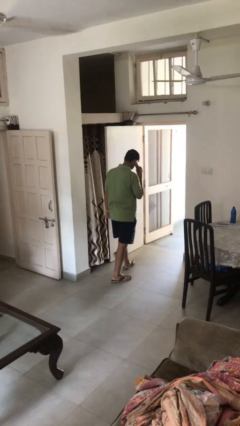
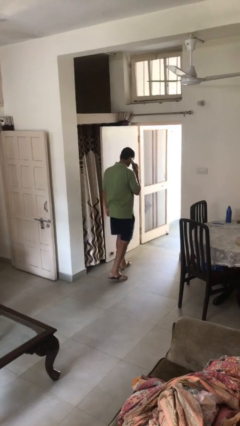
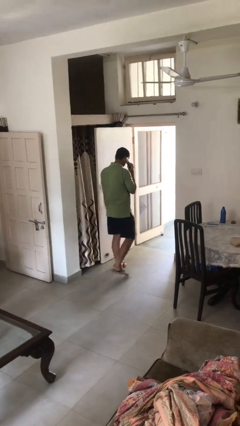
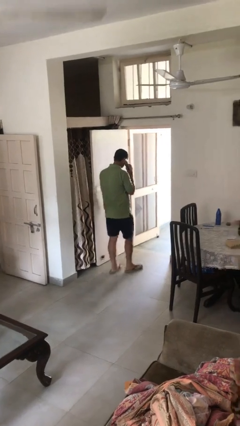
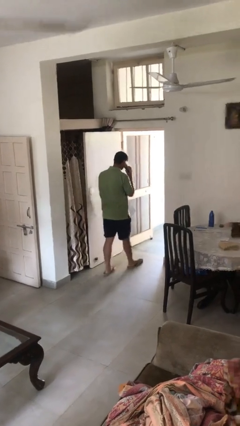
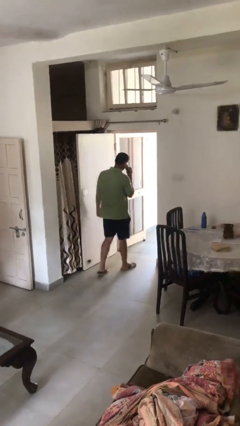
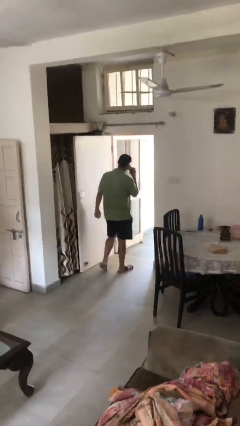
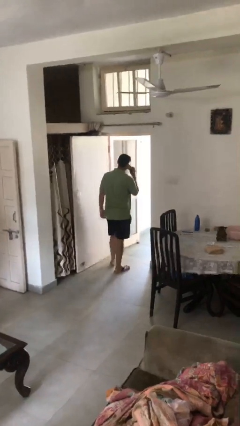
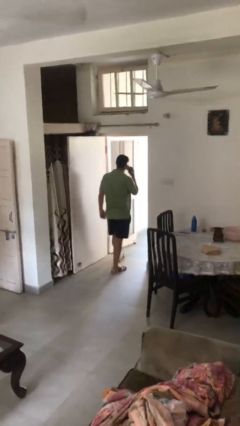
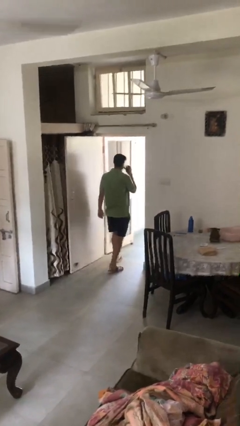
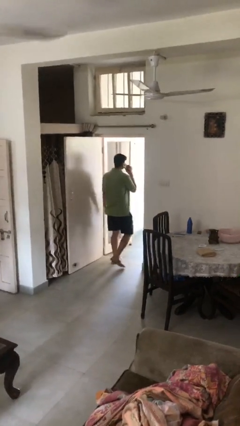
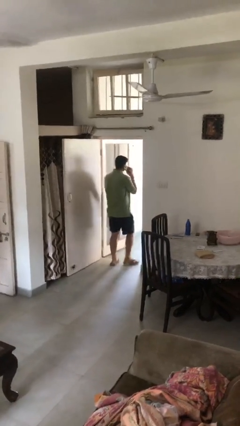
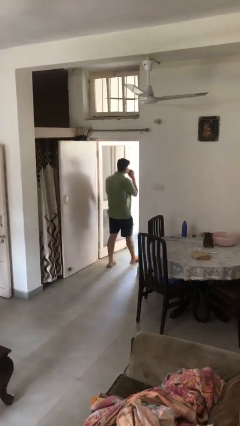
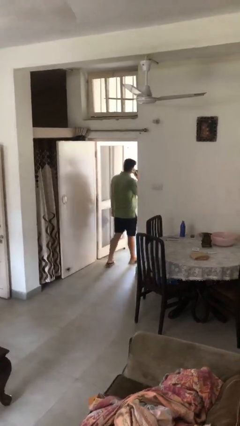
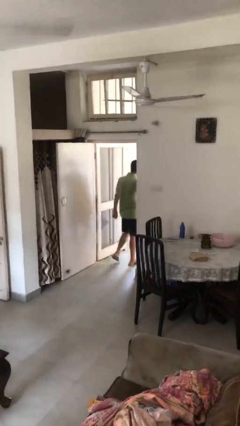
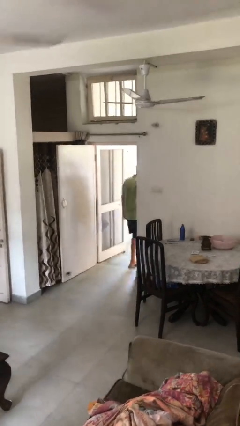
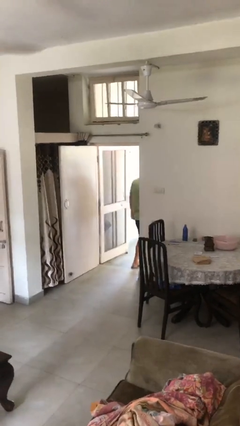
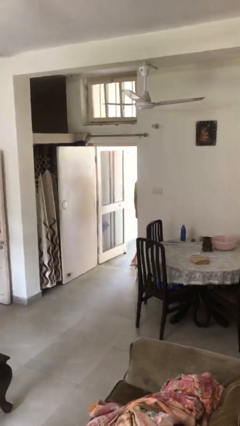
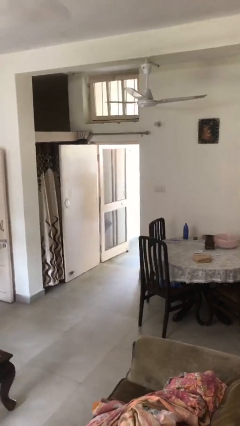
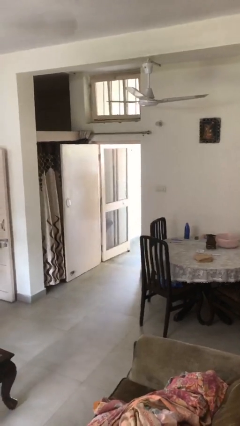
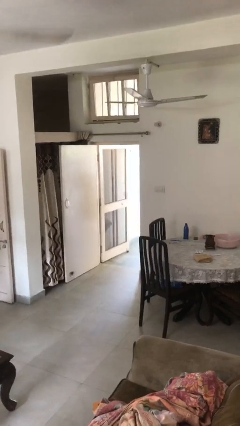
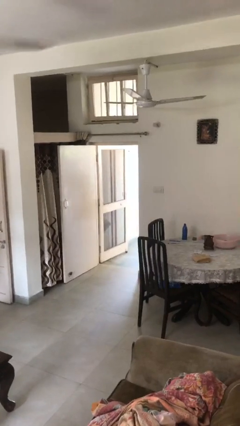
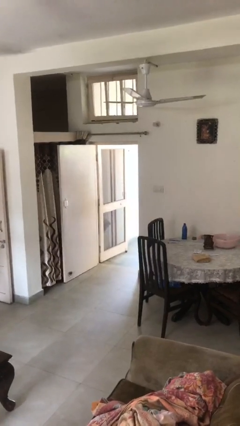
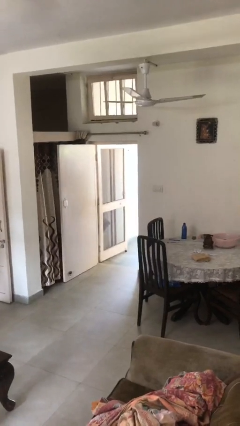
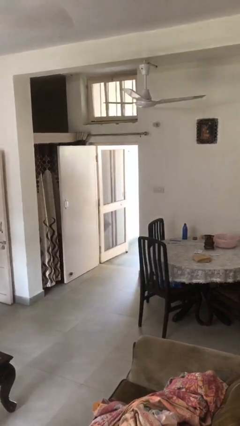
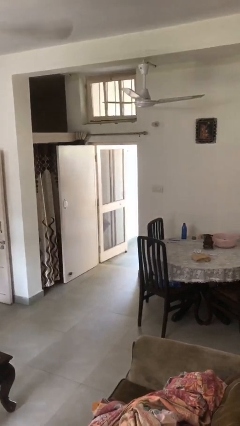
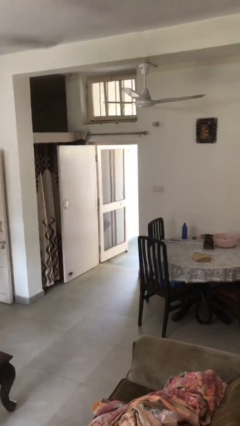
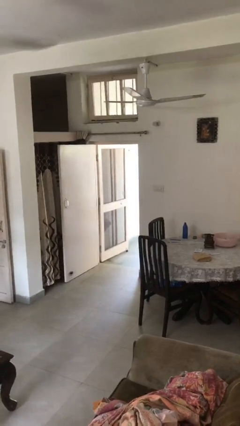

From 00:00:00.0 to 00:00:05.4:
person exits scene through structure

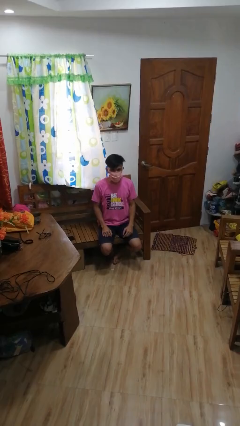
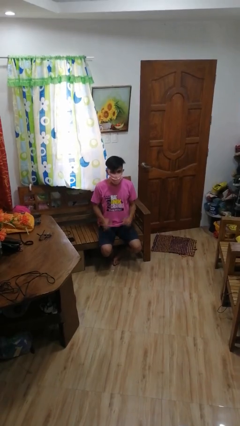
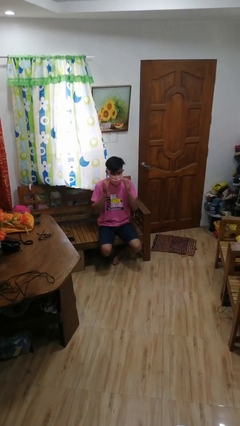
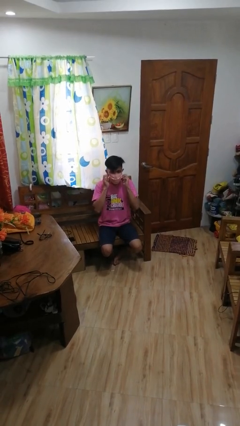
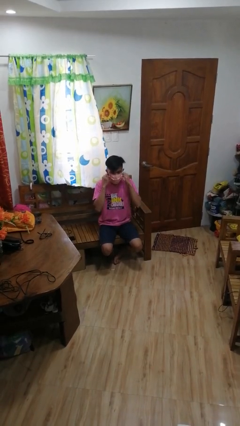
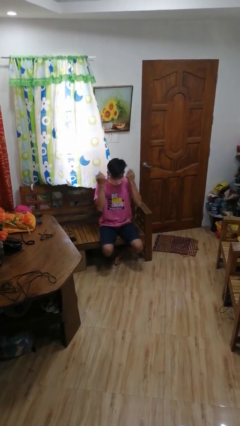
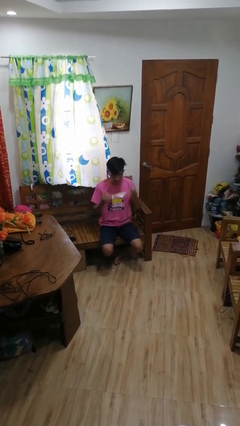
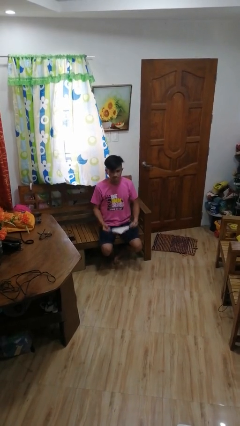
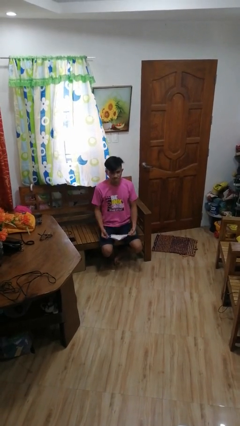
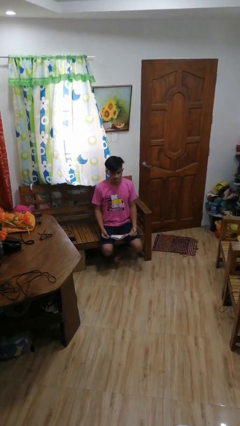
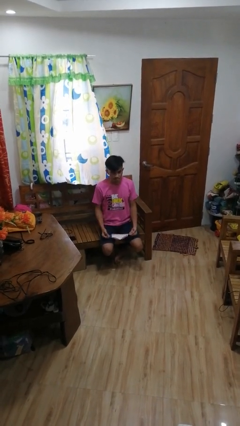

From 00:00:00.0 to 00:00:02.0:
person takes off facemask

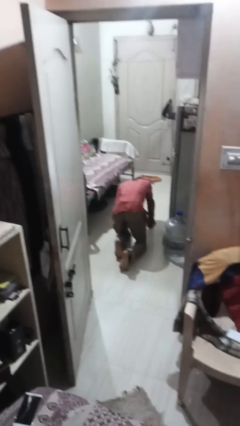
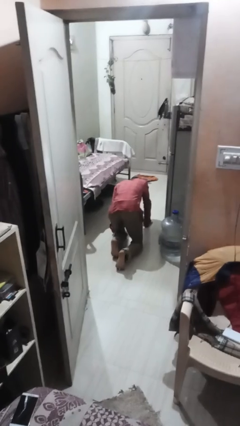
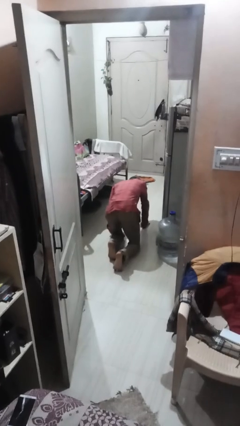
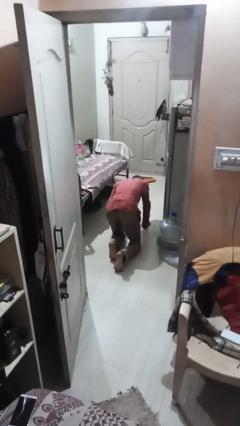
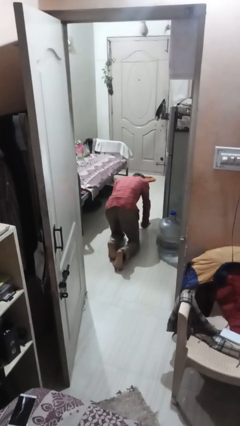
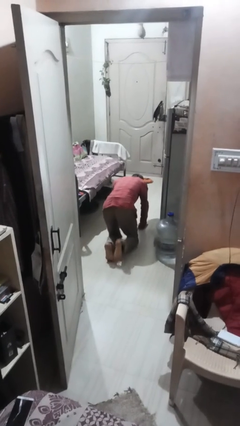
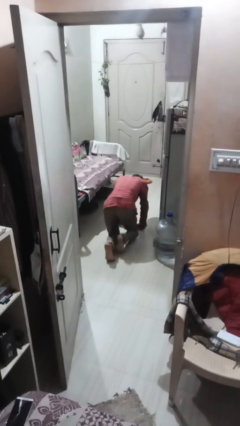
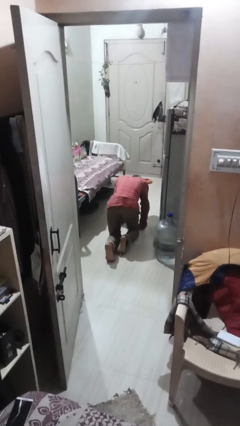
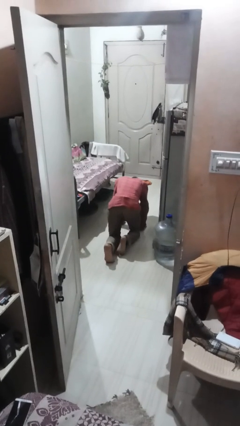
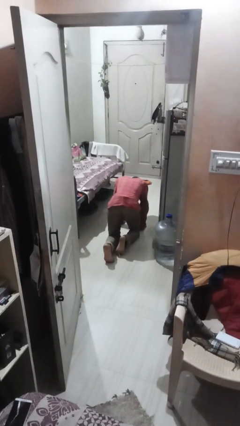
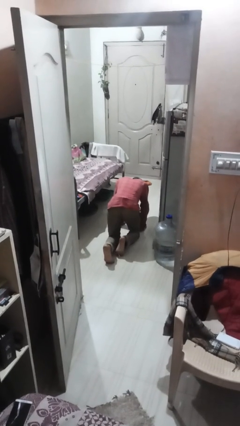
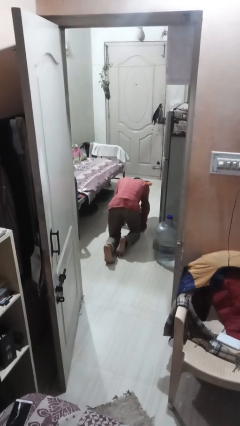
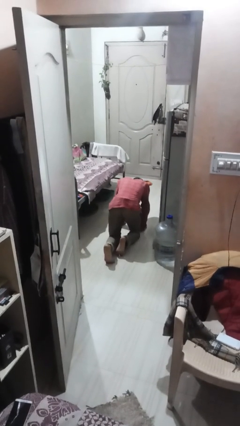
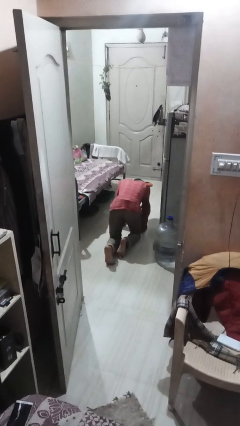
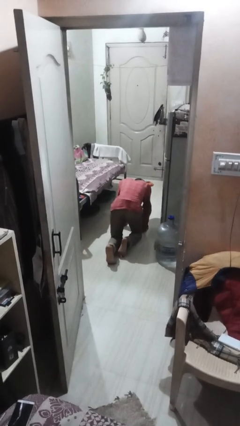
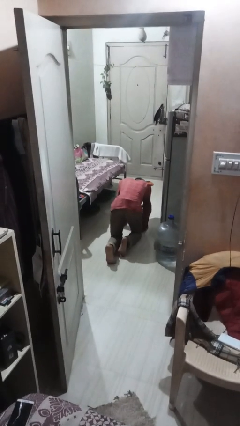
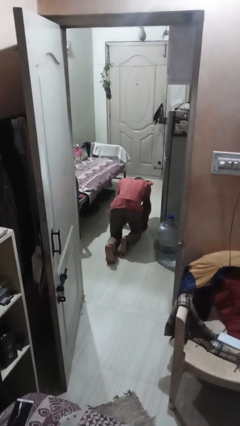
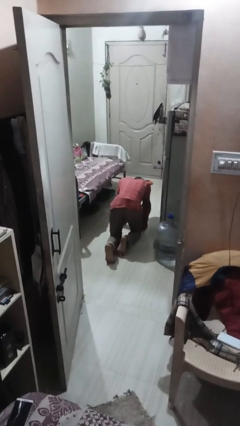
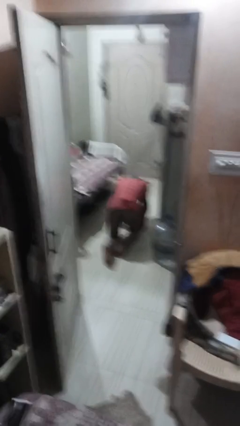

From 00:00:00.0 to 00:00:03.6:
person crawls

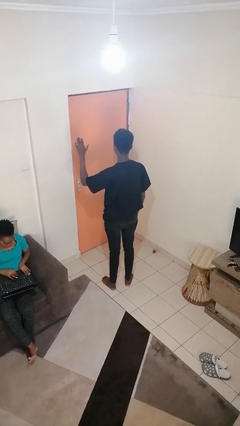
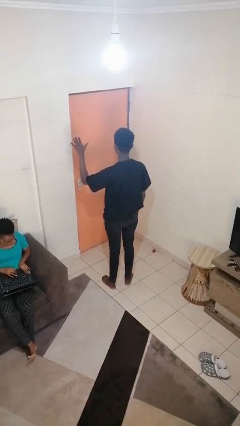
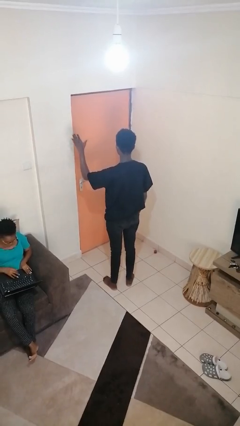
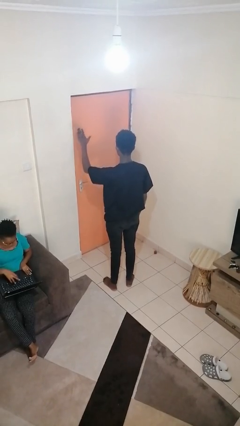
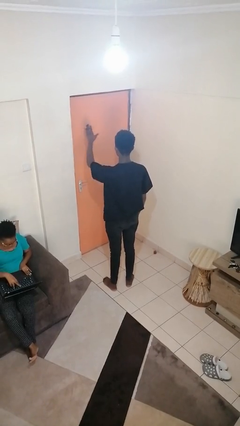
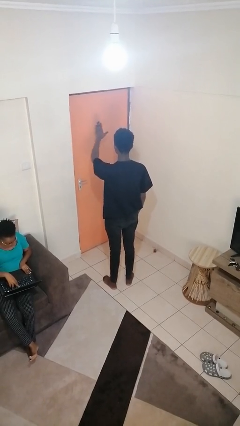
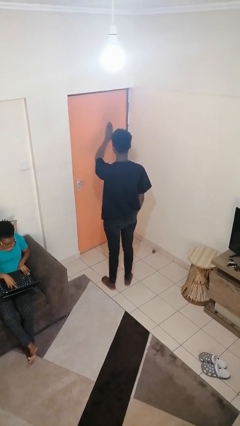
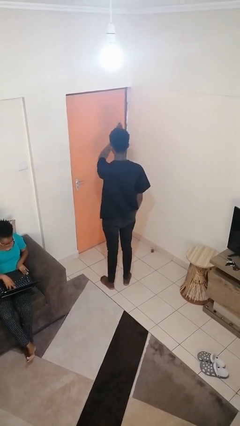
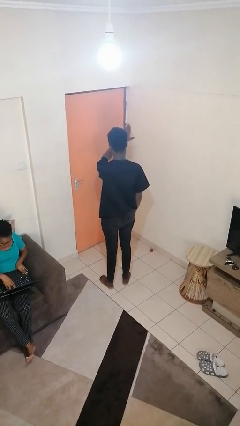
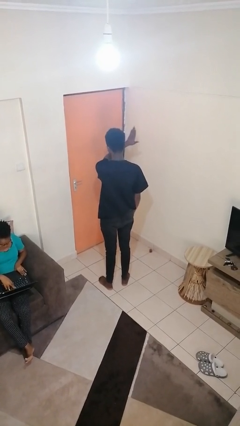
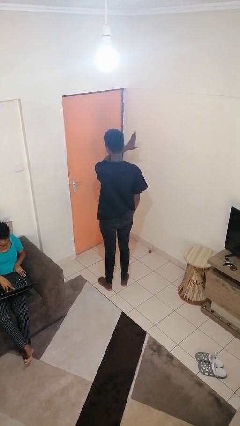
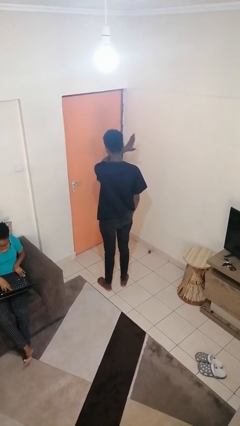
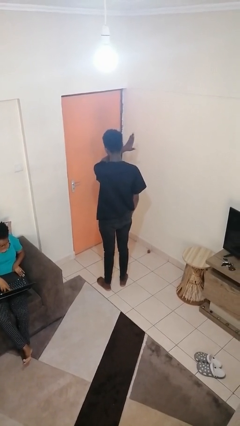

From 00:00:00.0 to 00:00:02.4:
person gestures swipe right

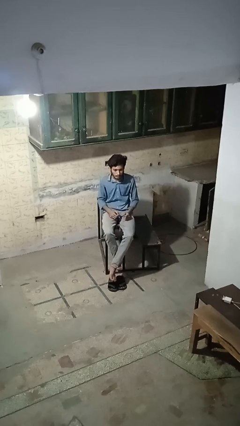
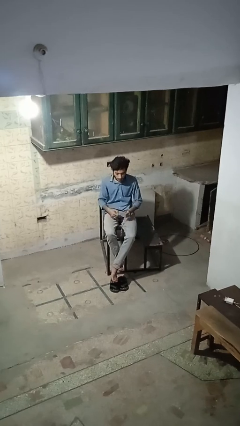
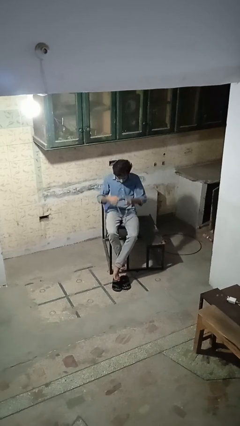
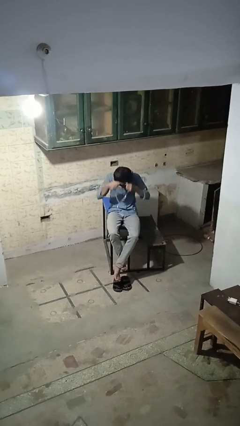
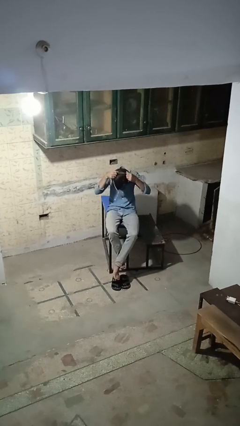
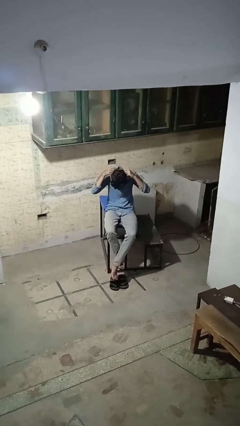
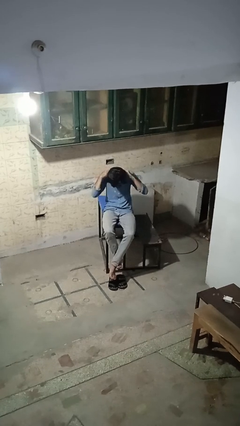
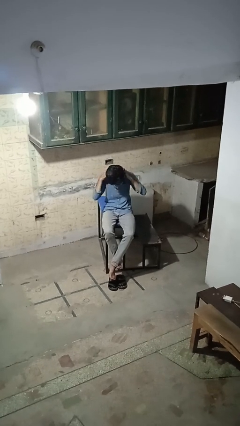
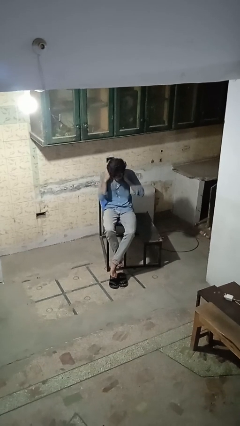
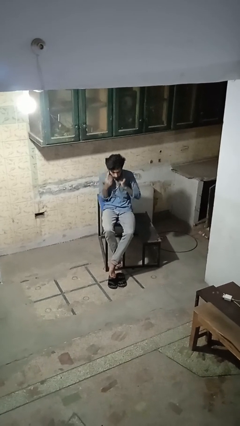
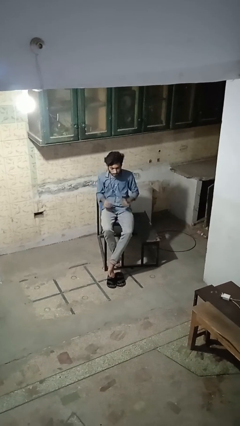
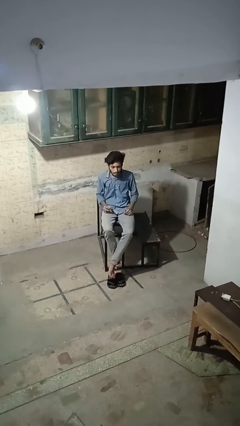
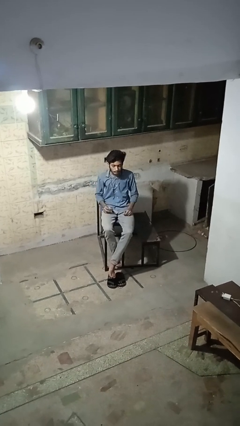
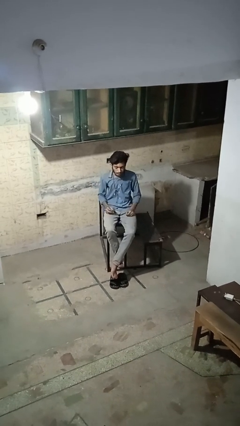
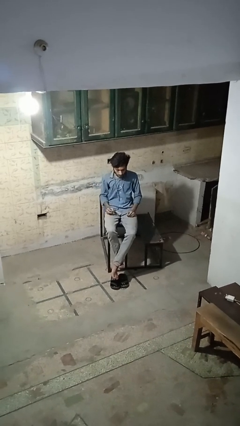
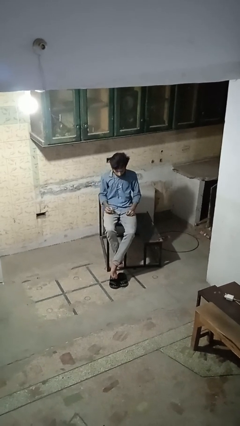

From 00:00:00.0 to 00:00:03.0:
person puts on necklace

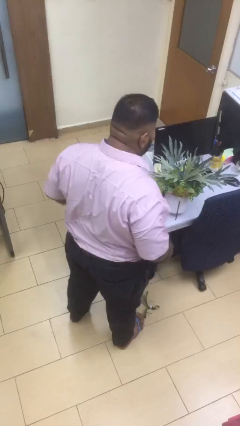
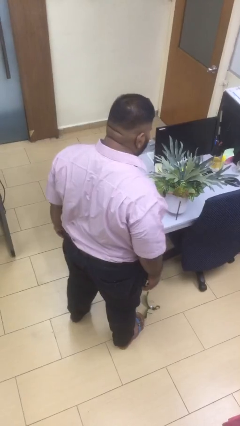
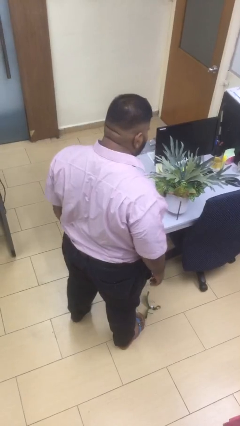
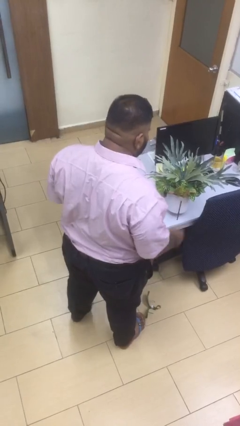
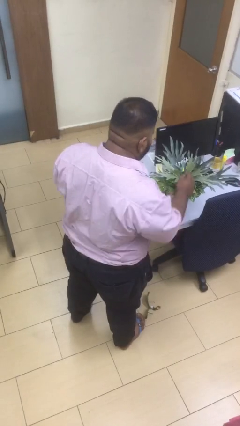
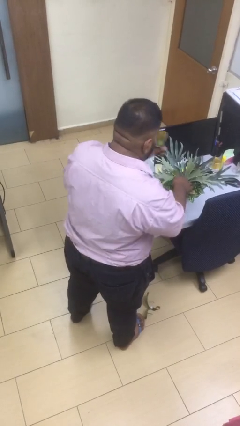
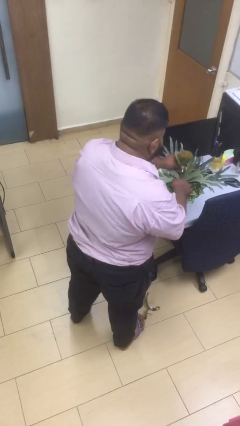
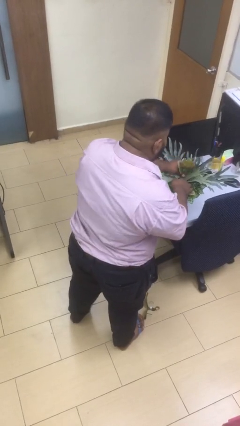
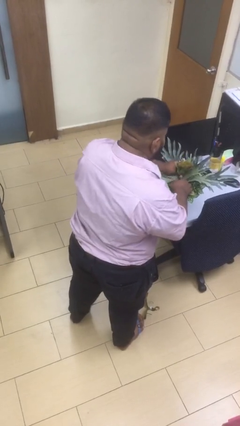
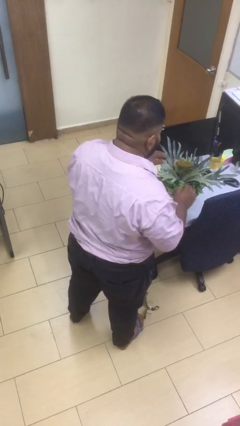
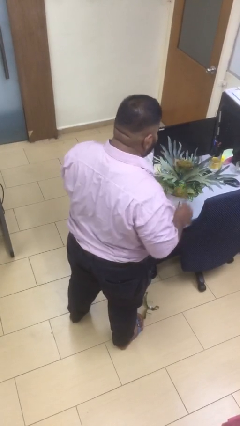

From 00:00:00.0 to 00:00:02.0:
person arranges flowers in vase
